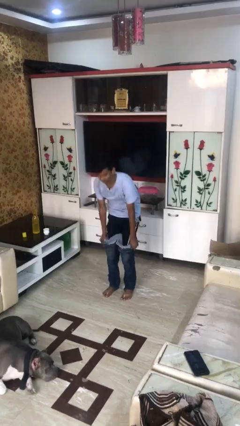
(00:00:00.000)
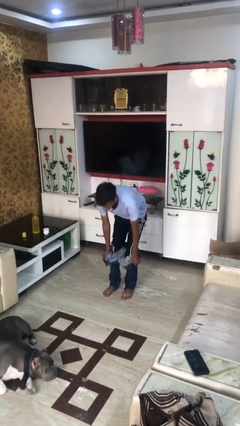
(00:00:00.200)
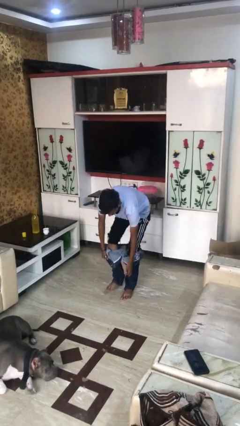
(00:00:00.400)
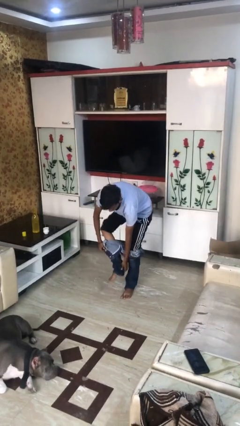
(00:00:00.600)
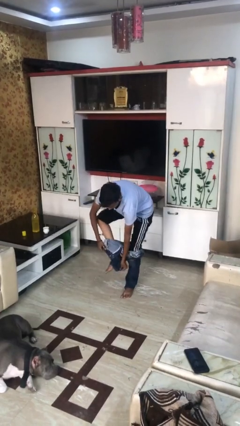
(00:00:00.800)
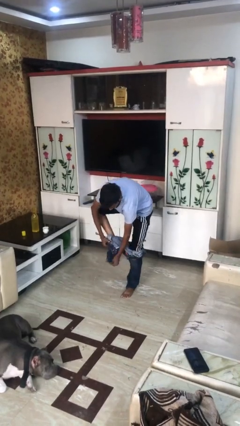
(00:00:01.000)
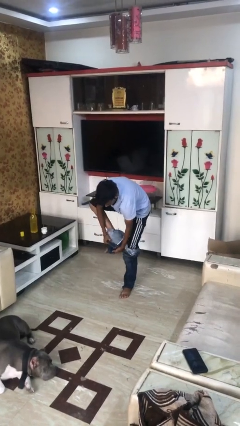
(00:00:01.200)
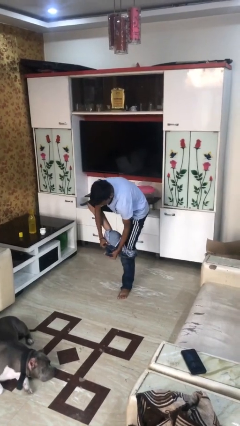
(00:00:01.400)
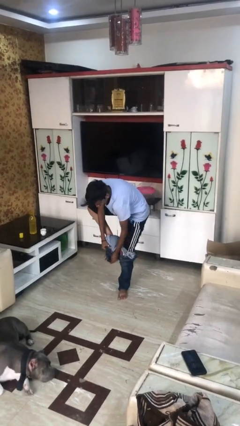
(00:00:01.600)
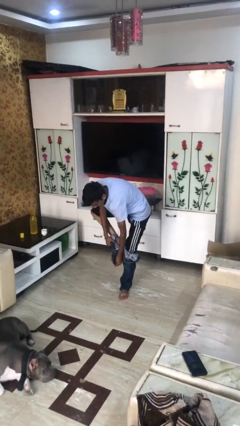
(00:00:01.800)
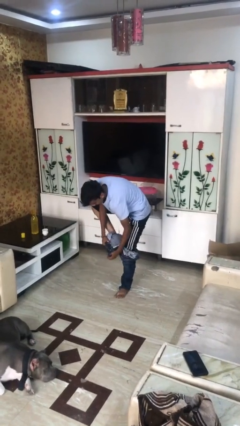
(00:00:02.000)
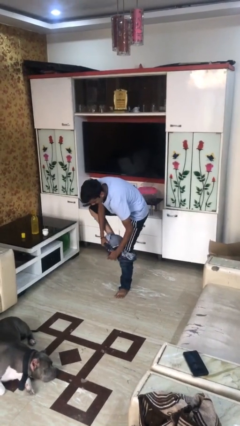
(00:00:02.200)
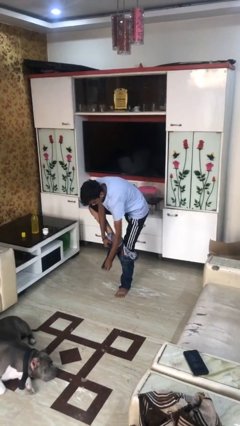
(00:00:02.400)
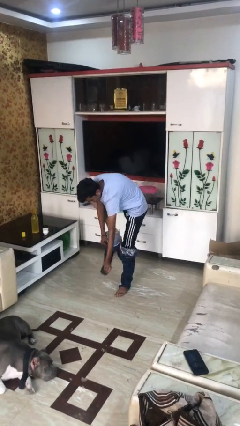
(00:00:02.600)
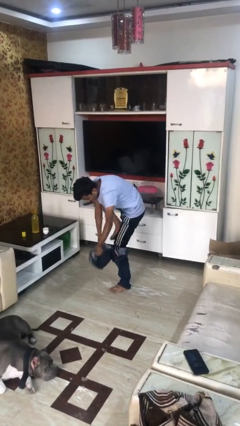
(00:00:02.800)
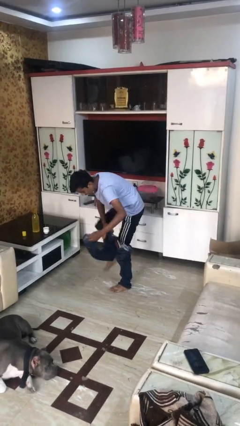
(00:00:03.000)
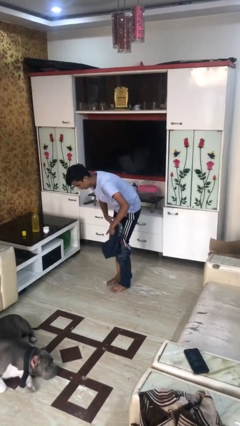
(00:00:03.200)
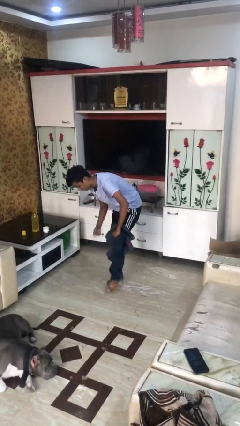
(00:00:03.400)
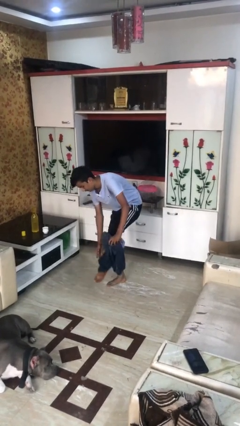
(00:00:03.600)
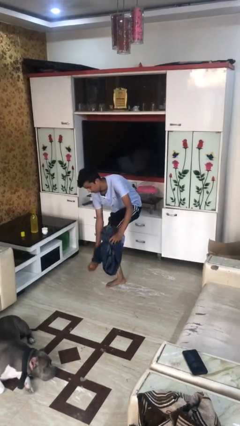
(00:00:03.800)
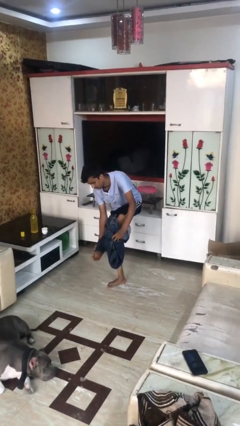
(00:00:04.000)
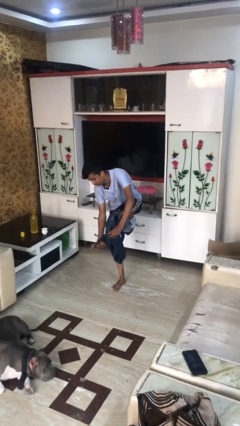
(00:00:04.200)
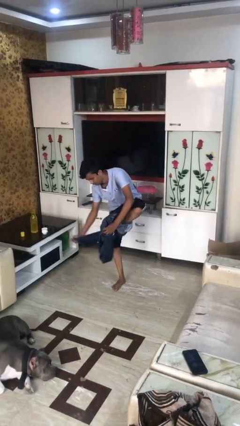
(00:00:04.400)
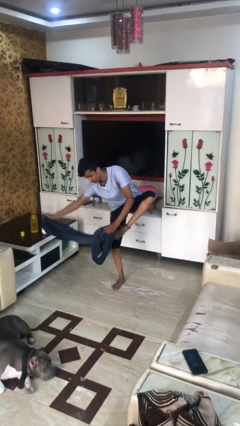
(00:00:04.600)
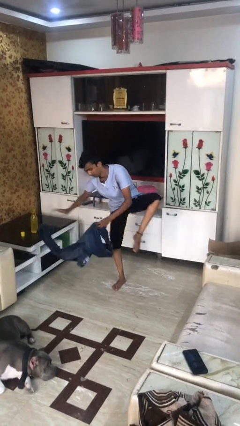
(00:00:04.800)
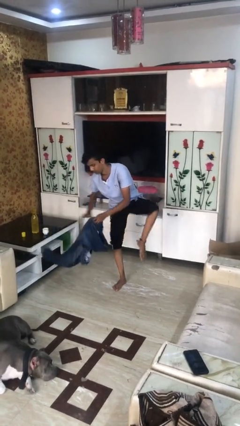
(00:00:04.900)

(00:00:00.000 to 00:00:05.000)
person takes off pants

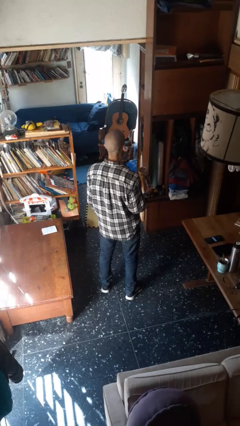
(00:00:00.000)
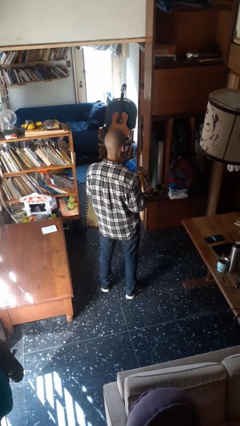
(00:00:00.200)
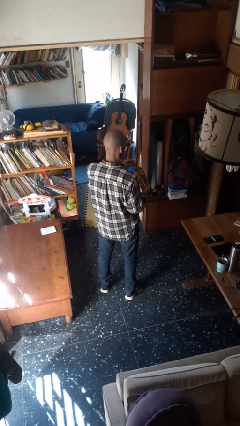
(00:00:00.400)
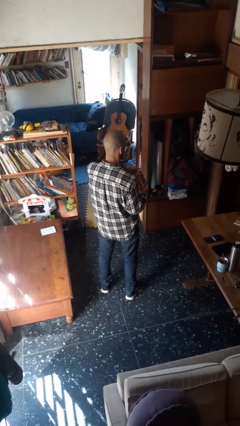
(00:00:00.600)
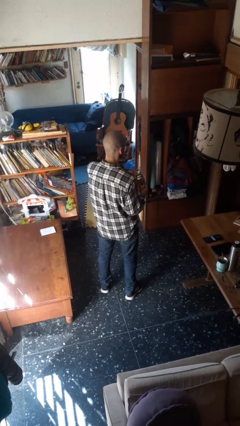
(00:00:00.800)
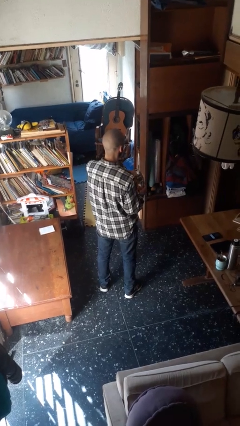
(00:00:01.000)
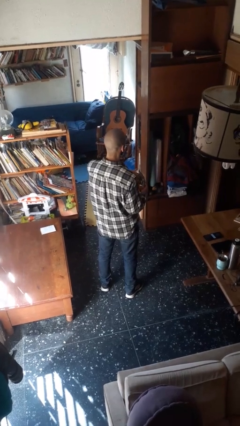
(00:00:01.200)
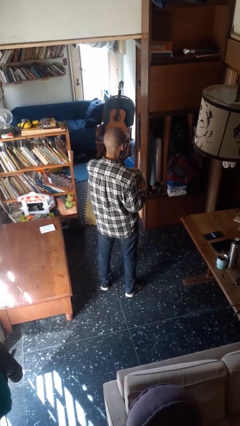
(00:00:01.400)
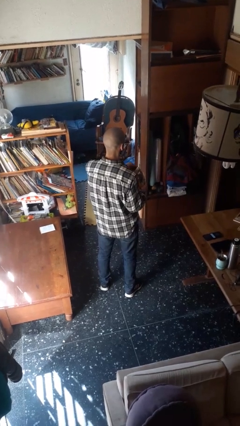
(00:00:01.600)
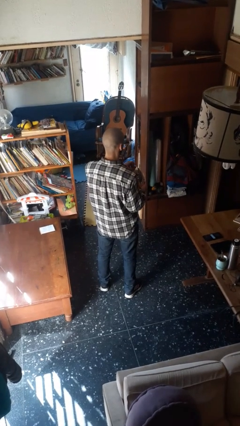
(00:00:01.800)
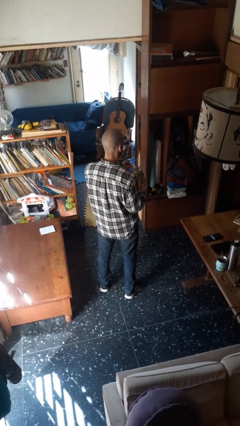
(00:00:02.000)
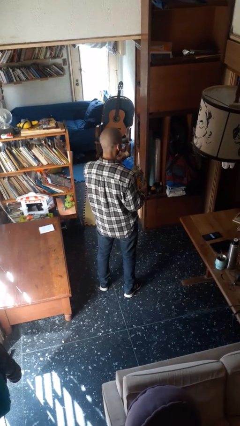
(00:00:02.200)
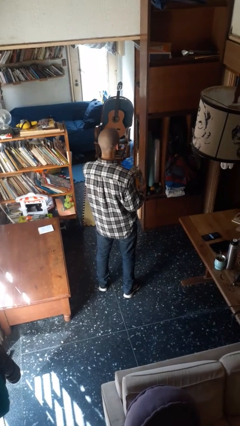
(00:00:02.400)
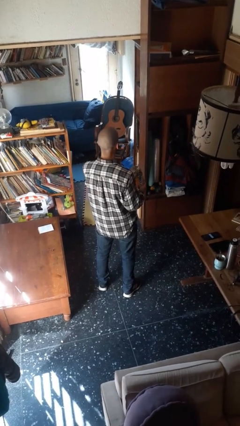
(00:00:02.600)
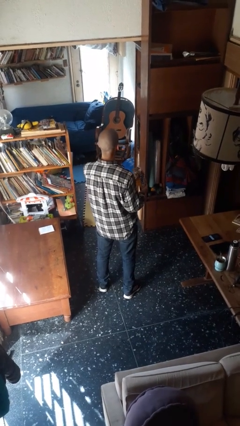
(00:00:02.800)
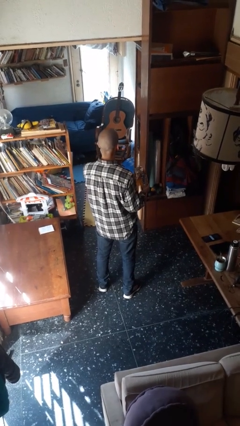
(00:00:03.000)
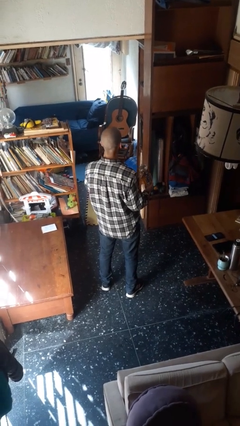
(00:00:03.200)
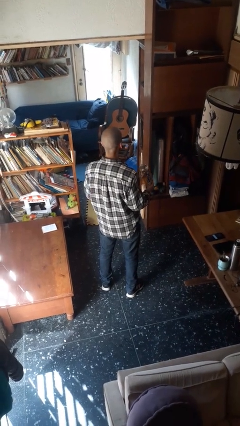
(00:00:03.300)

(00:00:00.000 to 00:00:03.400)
person eats snack from bag

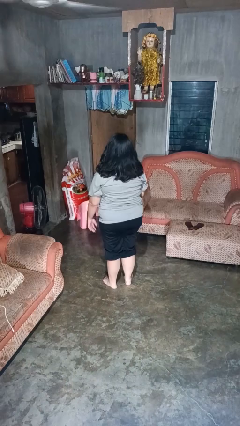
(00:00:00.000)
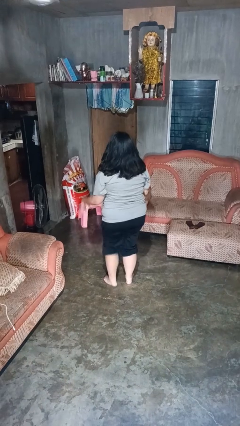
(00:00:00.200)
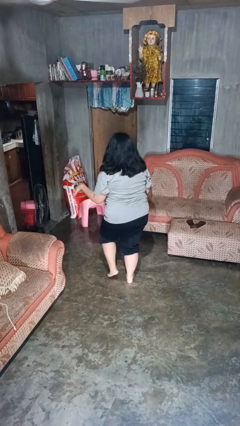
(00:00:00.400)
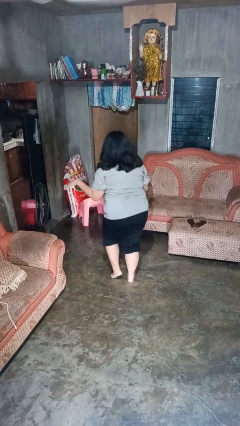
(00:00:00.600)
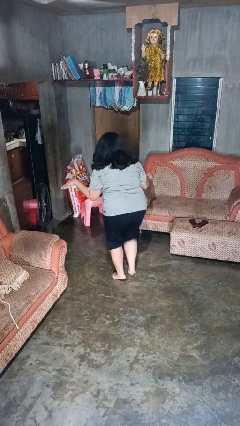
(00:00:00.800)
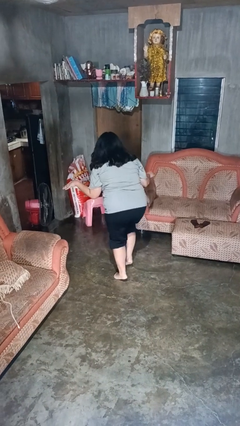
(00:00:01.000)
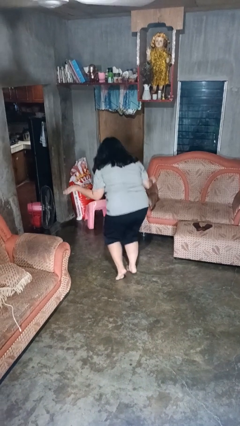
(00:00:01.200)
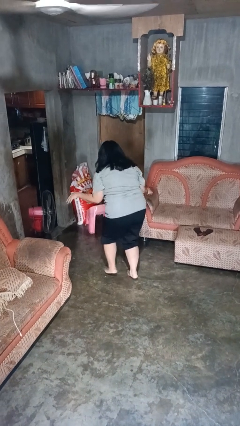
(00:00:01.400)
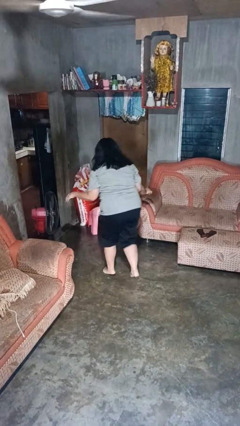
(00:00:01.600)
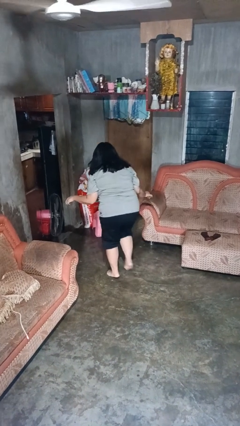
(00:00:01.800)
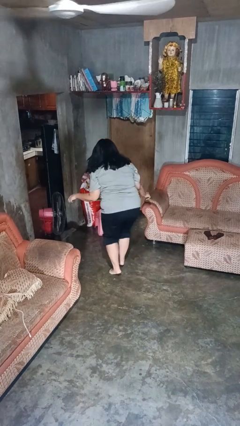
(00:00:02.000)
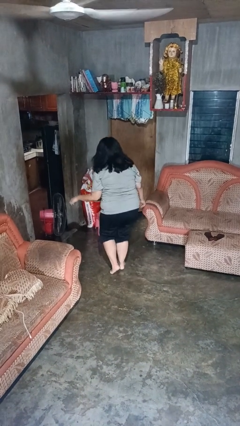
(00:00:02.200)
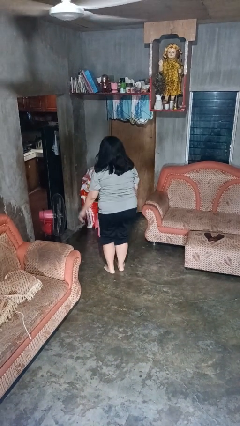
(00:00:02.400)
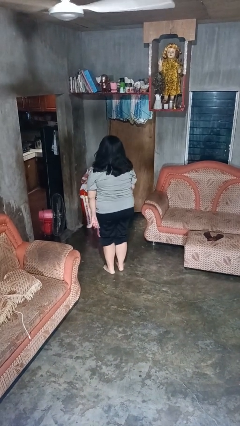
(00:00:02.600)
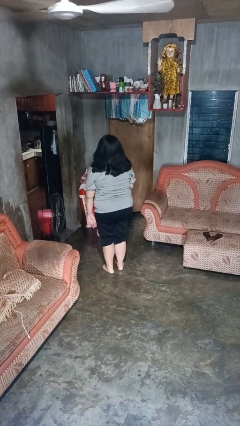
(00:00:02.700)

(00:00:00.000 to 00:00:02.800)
person walks tiptoe

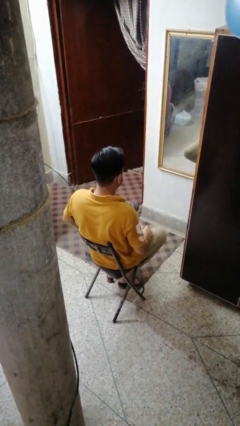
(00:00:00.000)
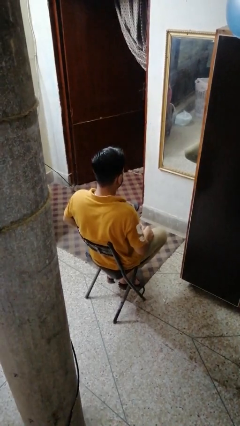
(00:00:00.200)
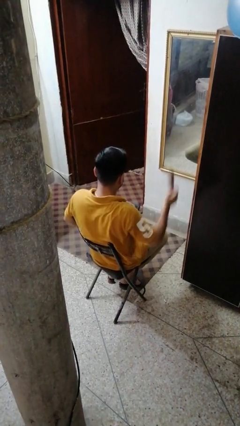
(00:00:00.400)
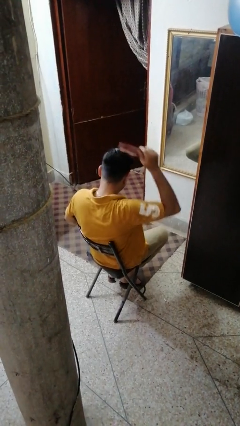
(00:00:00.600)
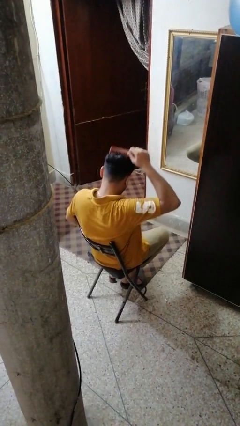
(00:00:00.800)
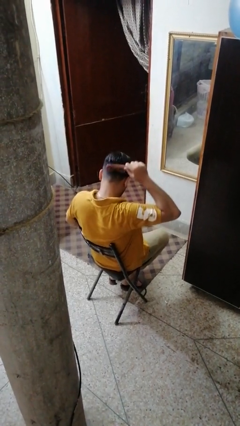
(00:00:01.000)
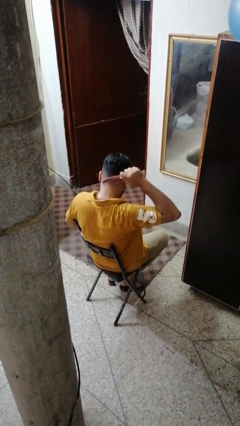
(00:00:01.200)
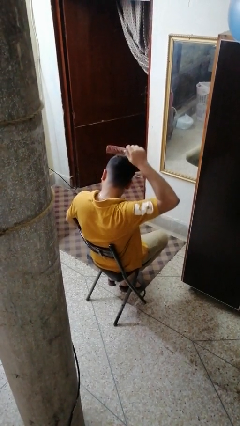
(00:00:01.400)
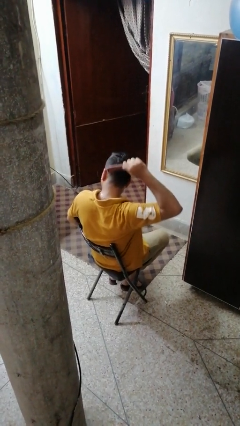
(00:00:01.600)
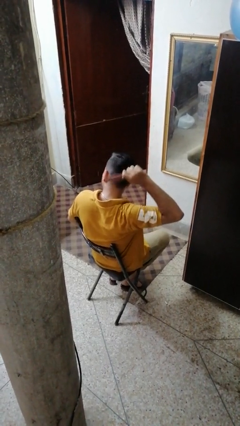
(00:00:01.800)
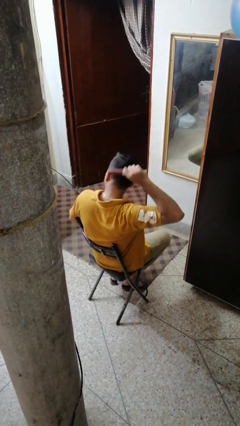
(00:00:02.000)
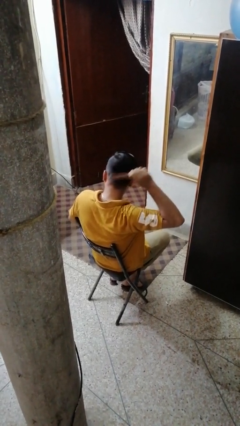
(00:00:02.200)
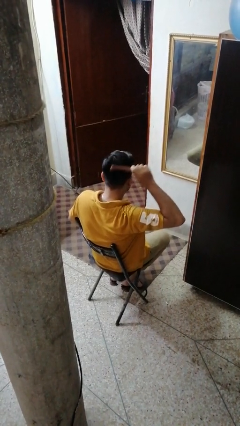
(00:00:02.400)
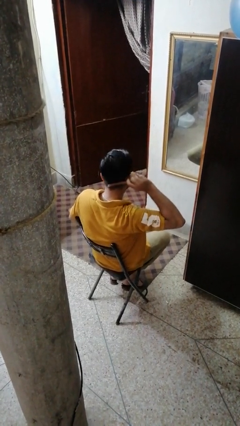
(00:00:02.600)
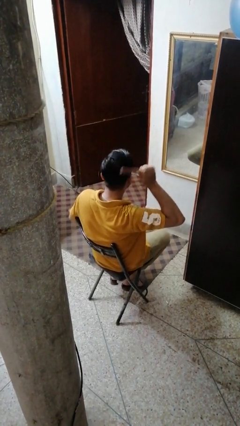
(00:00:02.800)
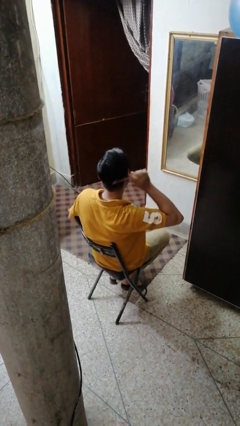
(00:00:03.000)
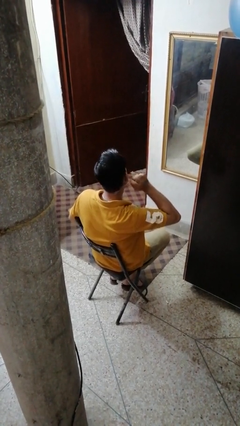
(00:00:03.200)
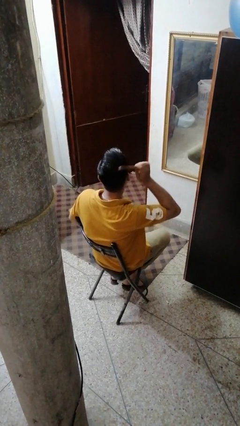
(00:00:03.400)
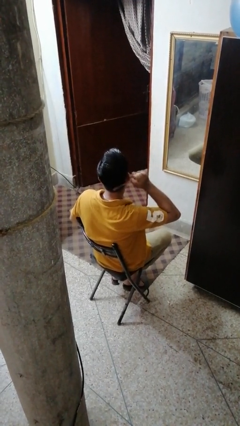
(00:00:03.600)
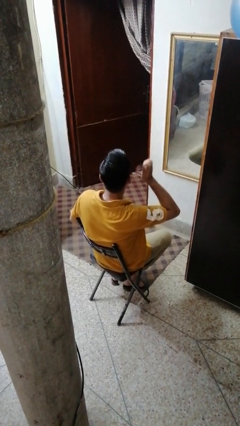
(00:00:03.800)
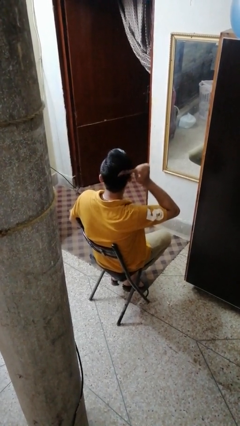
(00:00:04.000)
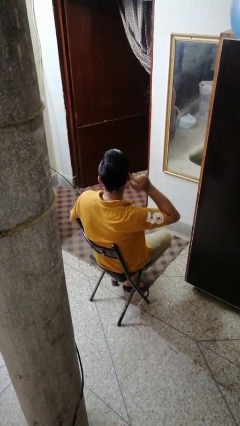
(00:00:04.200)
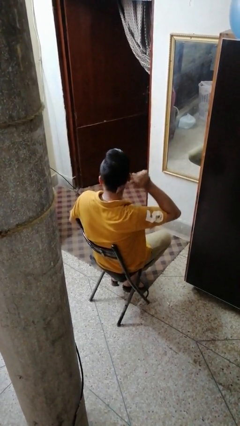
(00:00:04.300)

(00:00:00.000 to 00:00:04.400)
person brushes hair

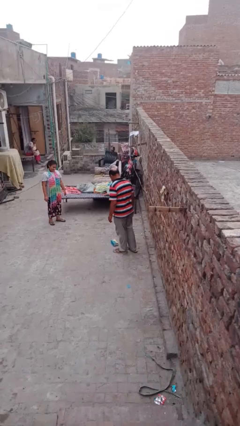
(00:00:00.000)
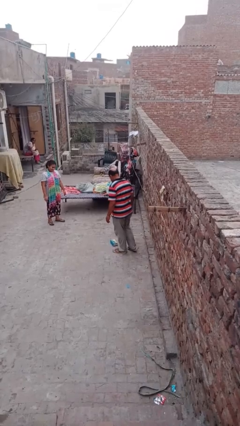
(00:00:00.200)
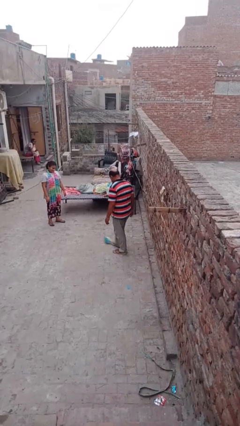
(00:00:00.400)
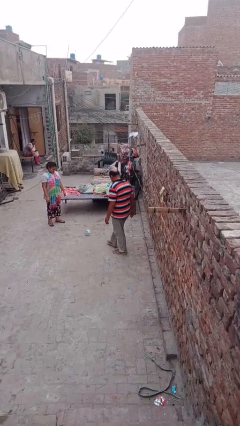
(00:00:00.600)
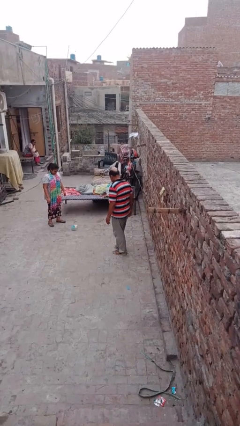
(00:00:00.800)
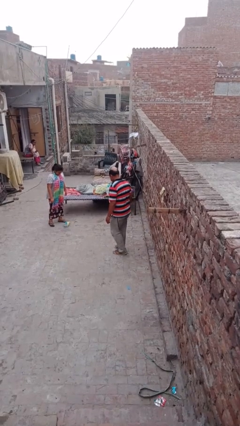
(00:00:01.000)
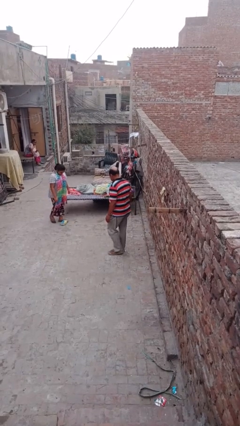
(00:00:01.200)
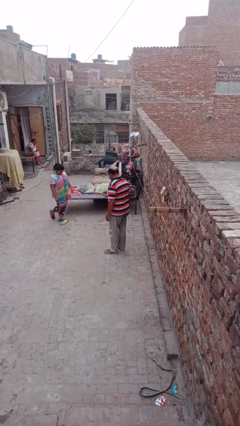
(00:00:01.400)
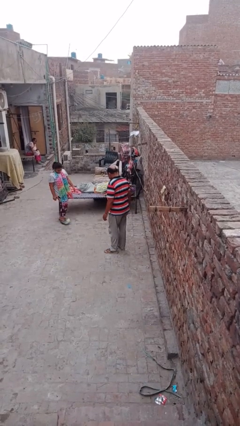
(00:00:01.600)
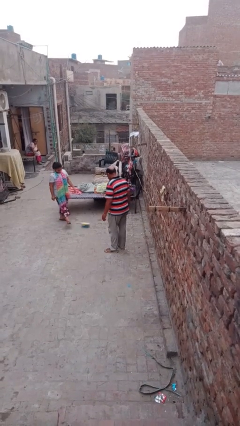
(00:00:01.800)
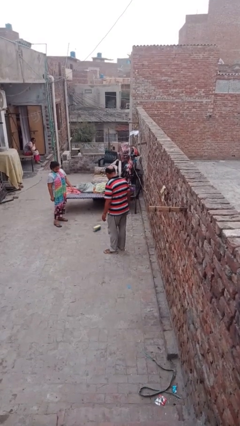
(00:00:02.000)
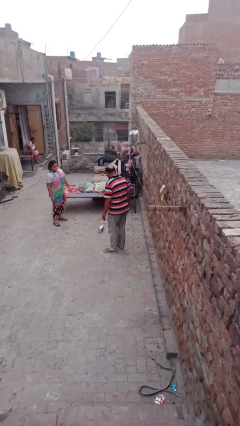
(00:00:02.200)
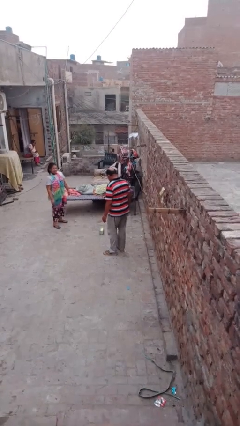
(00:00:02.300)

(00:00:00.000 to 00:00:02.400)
person kicks object to person
